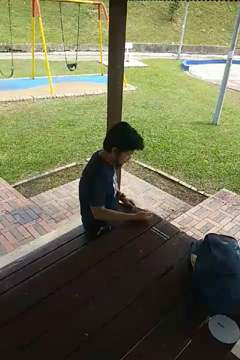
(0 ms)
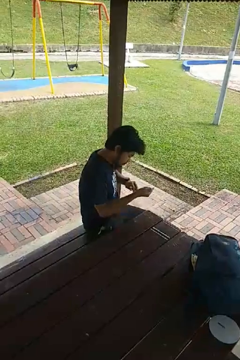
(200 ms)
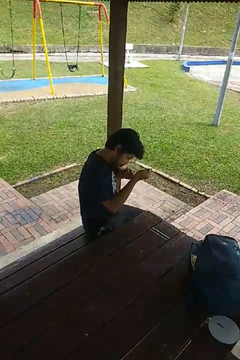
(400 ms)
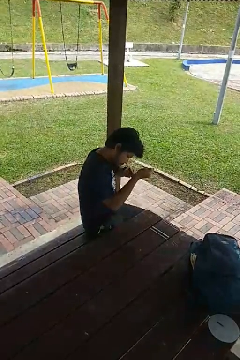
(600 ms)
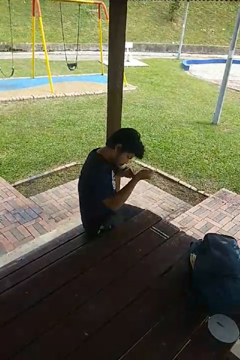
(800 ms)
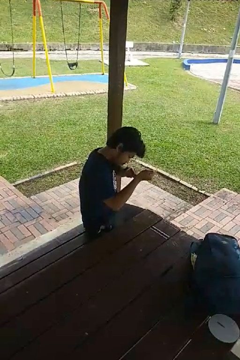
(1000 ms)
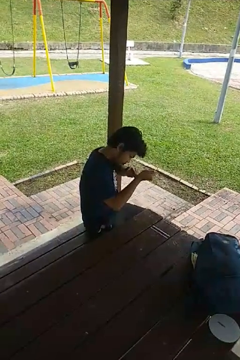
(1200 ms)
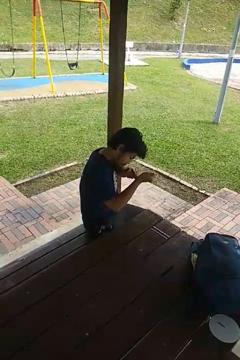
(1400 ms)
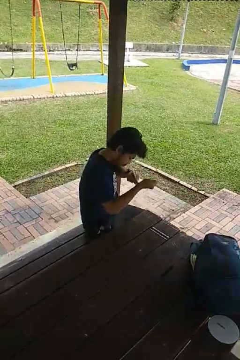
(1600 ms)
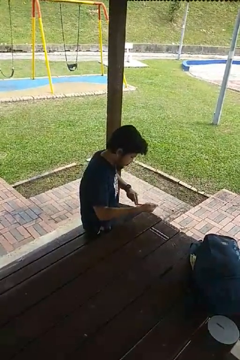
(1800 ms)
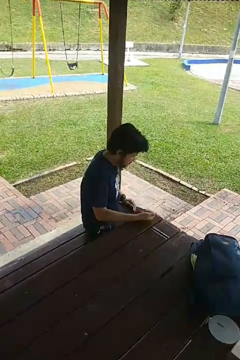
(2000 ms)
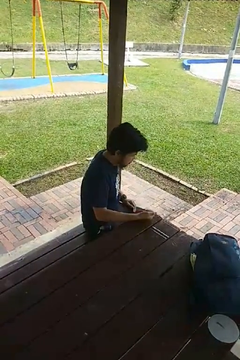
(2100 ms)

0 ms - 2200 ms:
person paints fingernails

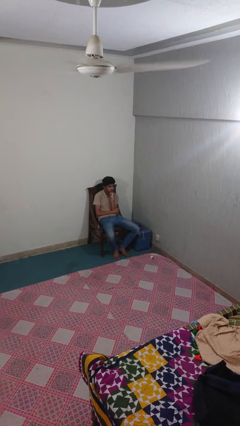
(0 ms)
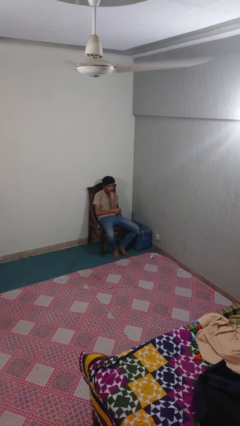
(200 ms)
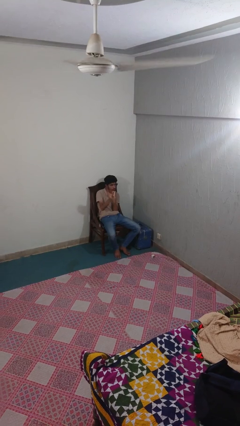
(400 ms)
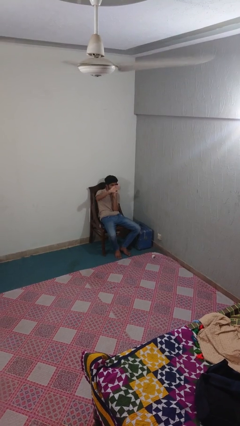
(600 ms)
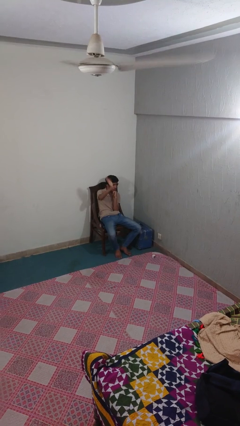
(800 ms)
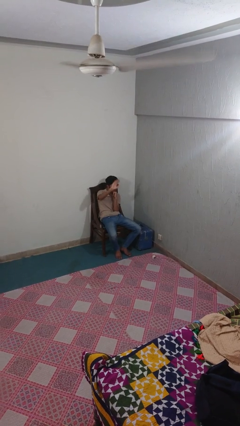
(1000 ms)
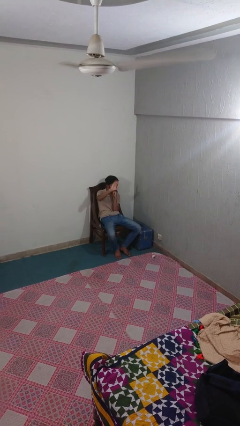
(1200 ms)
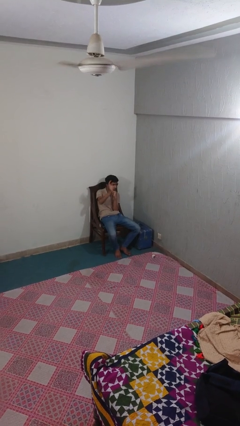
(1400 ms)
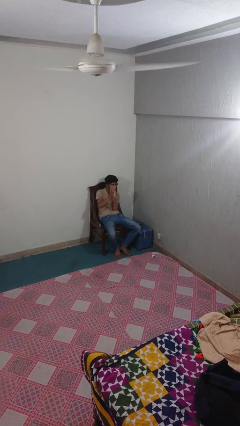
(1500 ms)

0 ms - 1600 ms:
person waves at person

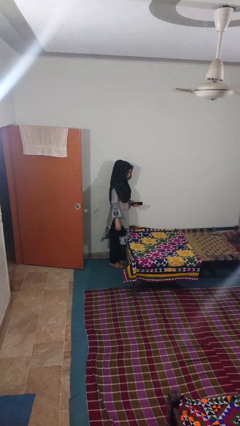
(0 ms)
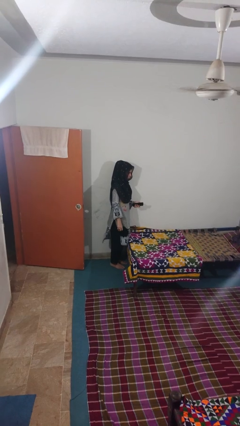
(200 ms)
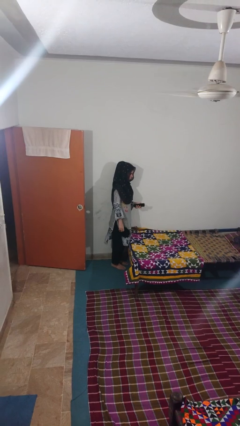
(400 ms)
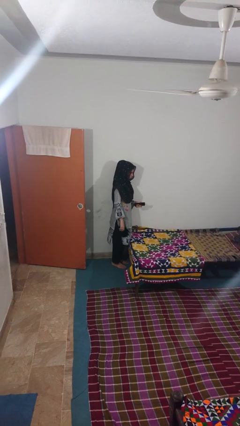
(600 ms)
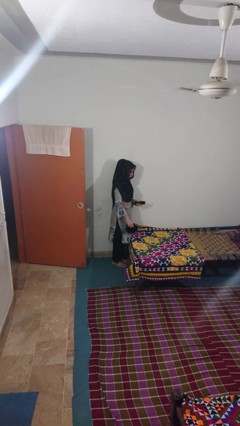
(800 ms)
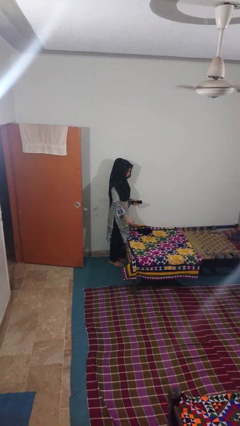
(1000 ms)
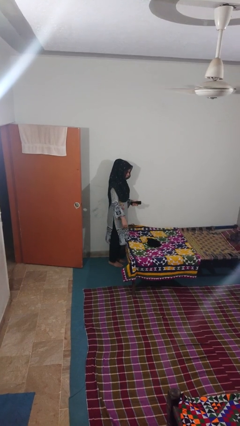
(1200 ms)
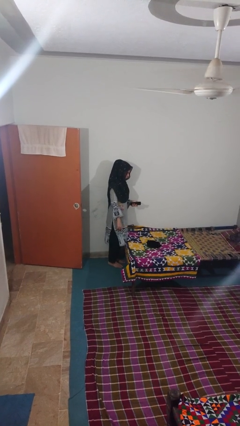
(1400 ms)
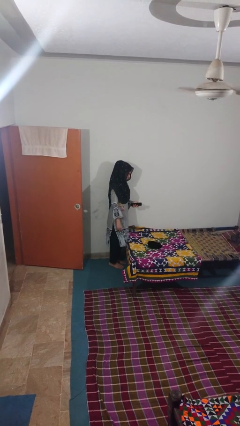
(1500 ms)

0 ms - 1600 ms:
person throws object on bed

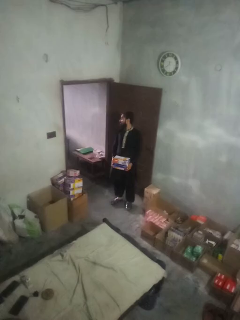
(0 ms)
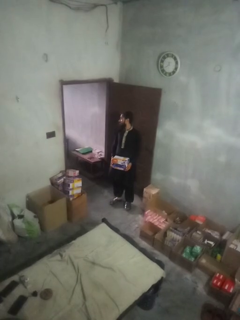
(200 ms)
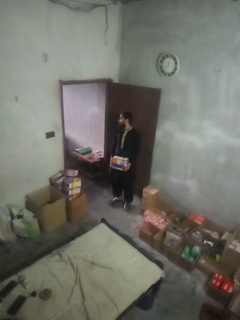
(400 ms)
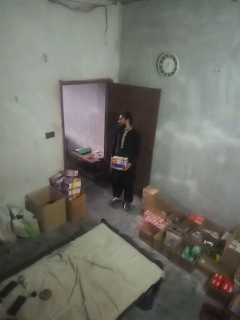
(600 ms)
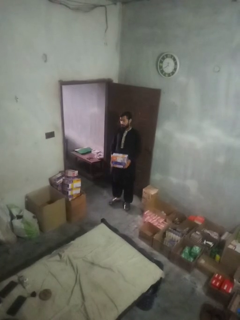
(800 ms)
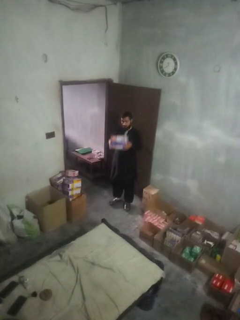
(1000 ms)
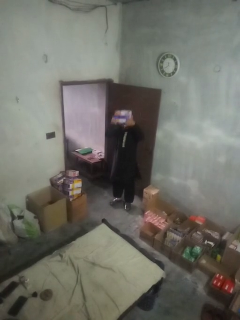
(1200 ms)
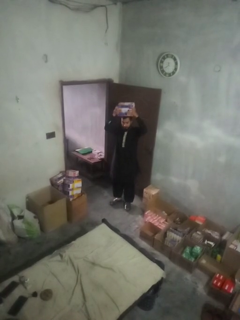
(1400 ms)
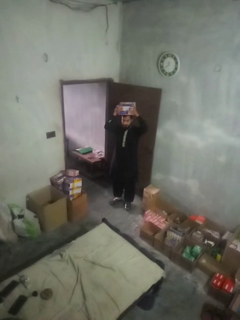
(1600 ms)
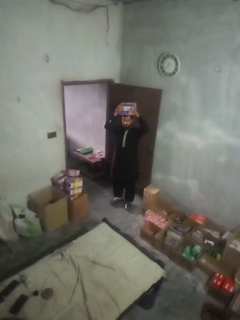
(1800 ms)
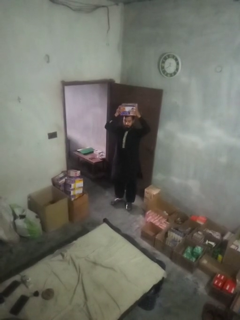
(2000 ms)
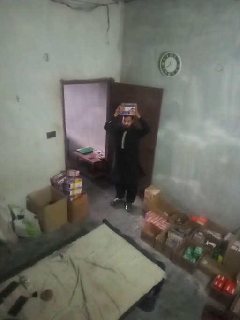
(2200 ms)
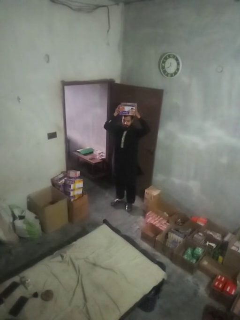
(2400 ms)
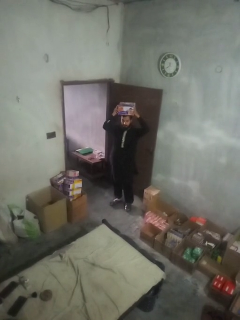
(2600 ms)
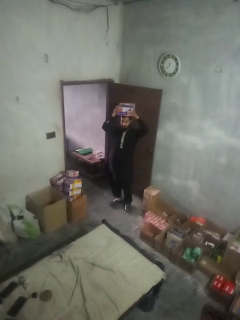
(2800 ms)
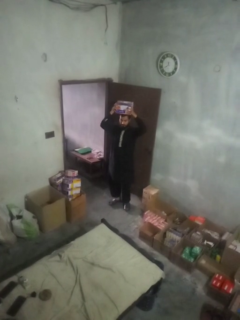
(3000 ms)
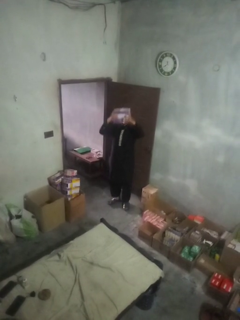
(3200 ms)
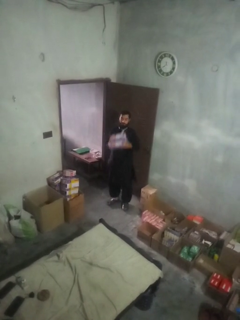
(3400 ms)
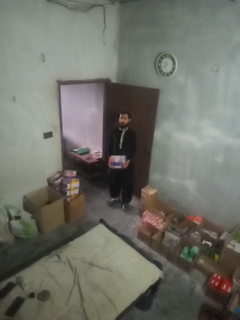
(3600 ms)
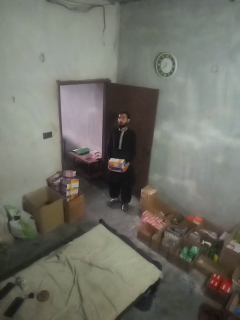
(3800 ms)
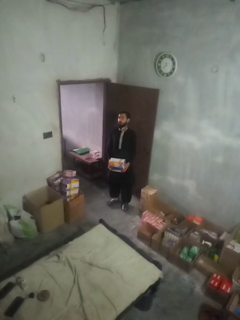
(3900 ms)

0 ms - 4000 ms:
person holds object above head

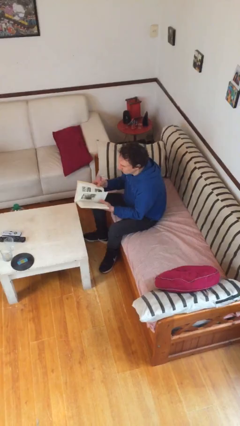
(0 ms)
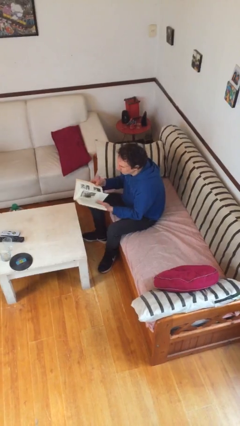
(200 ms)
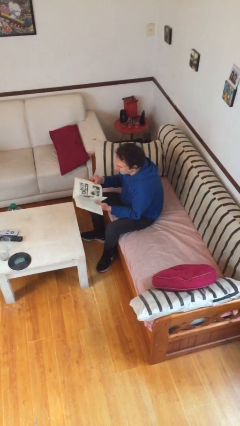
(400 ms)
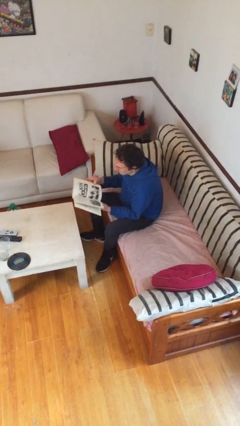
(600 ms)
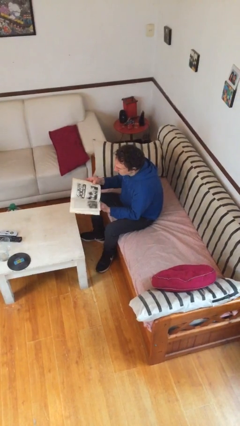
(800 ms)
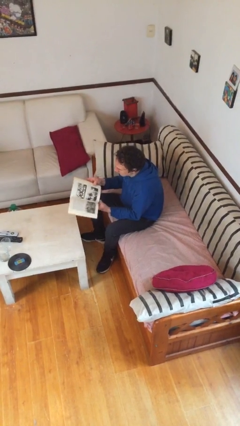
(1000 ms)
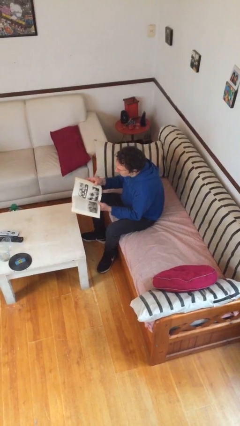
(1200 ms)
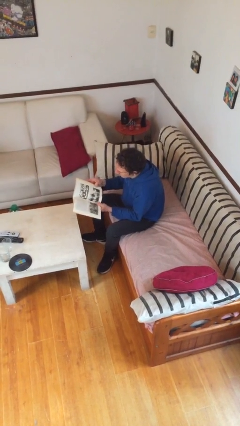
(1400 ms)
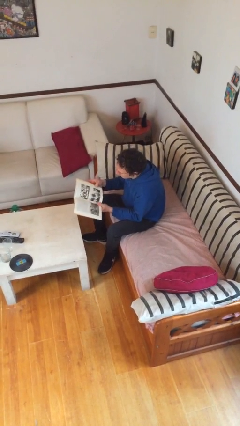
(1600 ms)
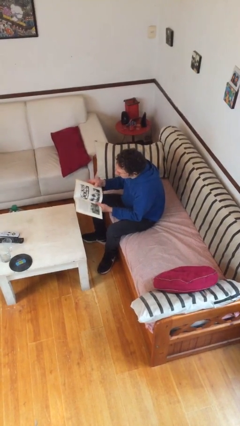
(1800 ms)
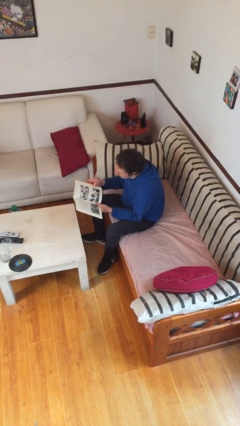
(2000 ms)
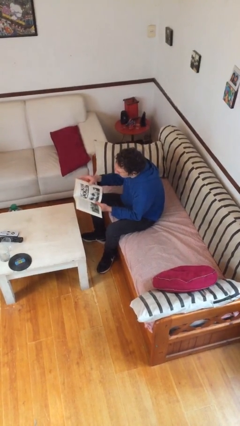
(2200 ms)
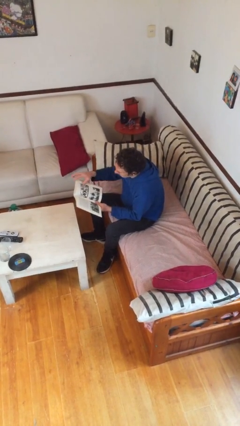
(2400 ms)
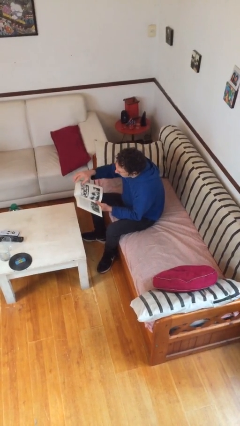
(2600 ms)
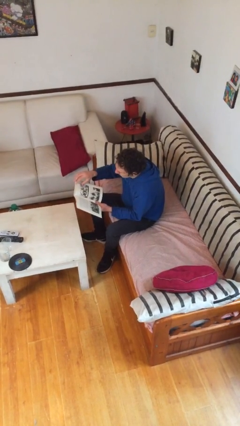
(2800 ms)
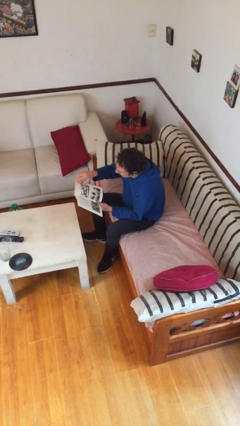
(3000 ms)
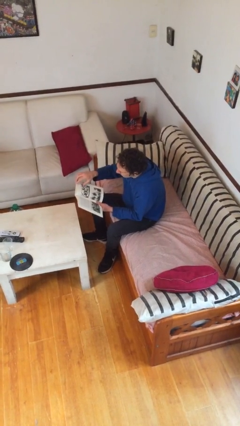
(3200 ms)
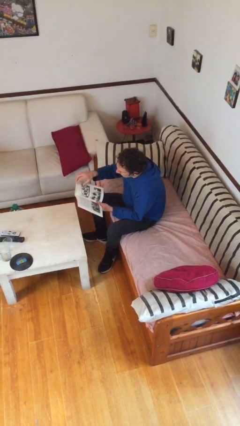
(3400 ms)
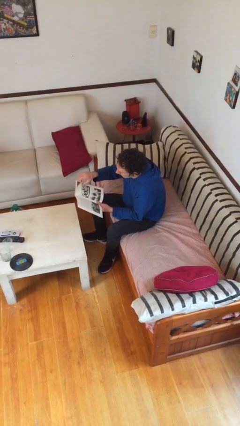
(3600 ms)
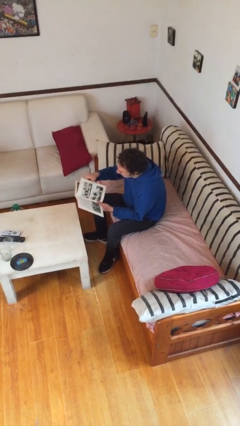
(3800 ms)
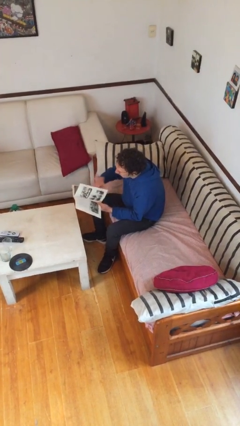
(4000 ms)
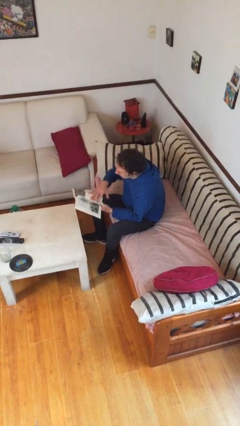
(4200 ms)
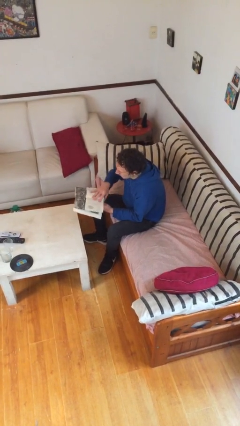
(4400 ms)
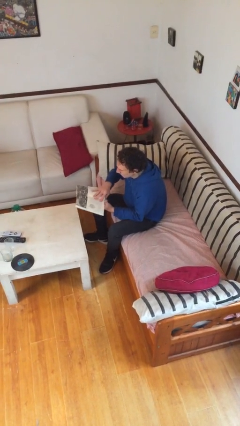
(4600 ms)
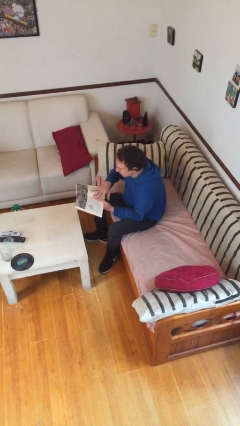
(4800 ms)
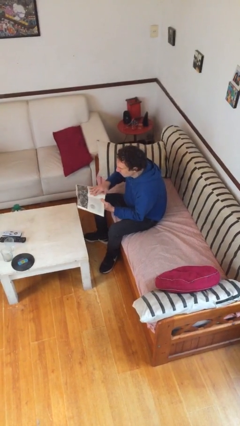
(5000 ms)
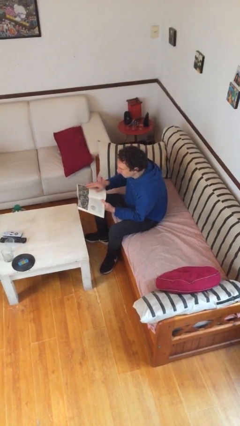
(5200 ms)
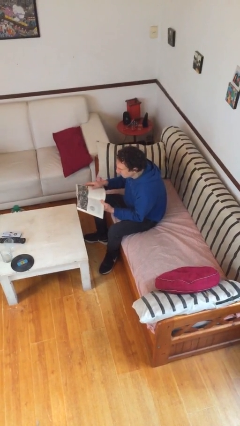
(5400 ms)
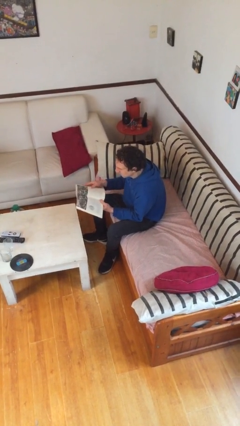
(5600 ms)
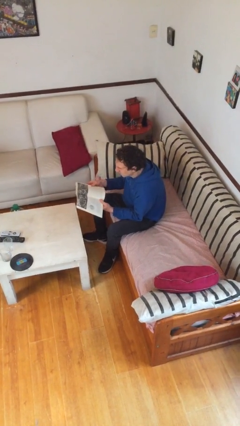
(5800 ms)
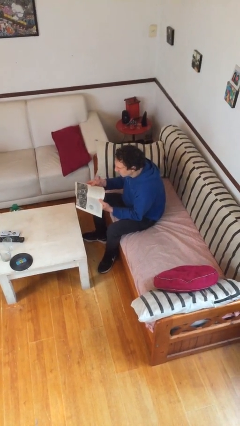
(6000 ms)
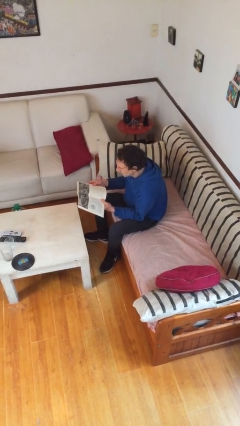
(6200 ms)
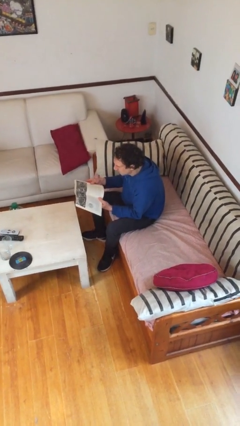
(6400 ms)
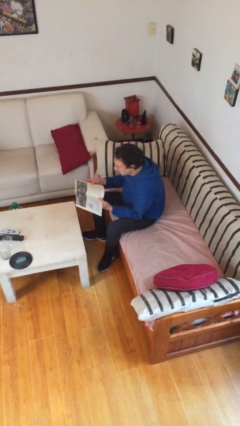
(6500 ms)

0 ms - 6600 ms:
person reads document

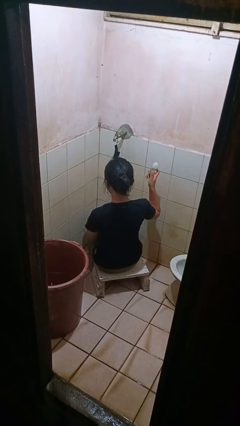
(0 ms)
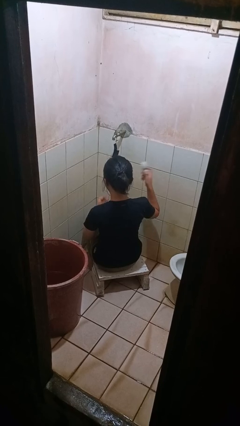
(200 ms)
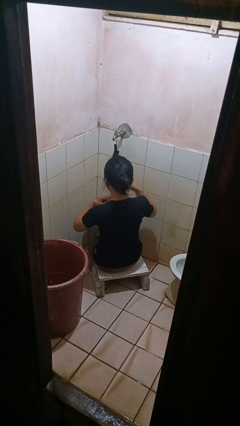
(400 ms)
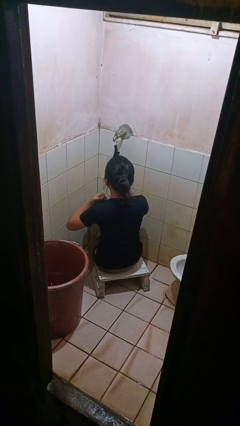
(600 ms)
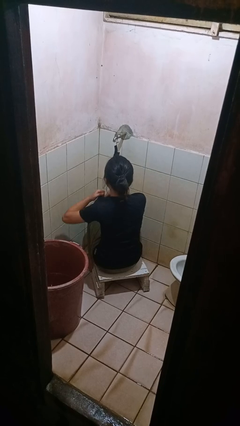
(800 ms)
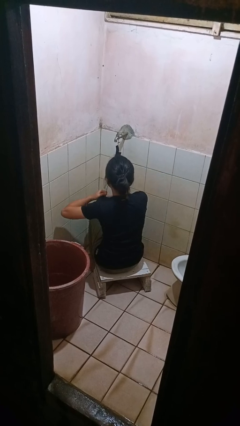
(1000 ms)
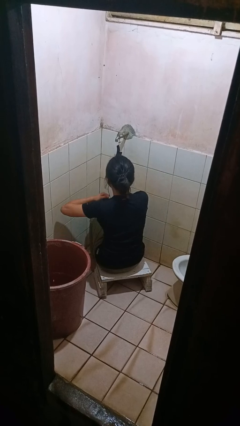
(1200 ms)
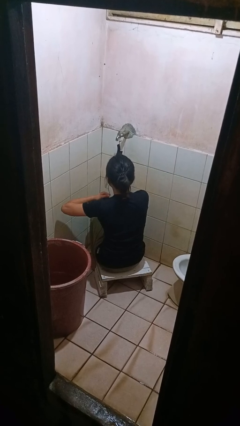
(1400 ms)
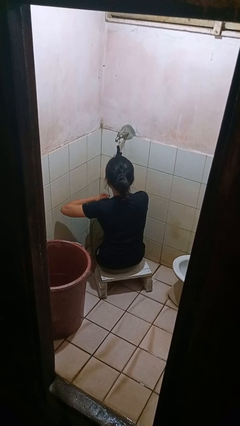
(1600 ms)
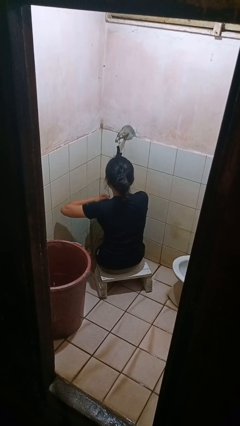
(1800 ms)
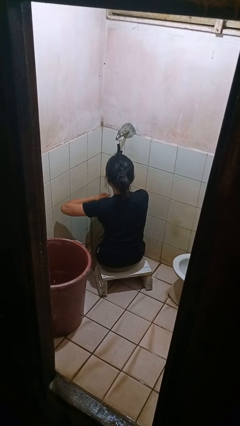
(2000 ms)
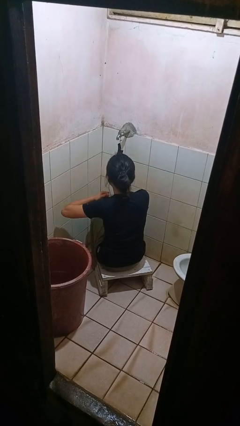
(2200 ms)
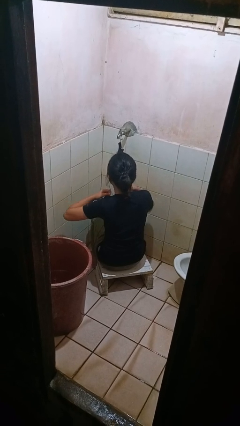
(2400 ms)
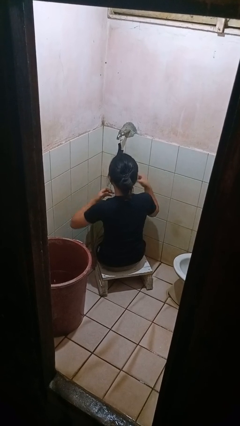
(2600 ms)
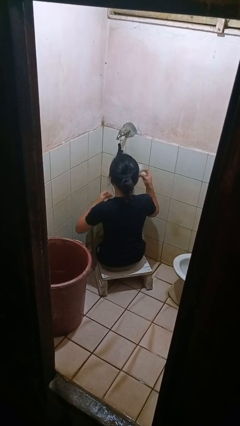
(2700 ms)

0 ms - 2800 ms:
person applies deodorant
